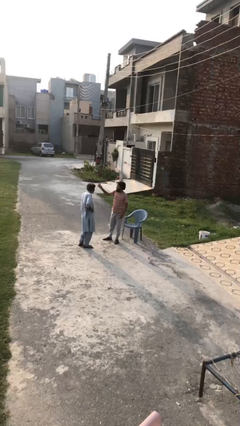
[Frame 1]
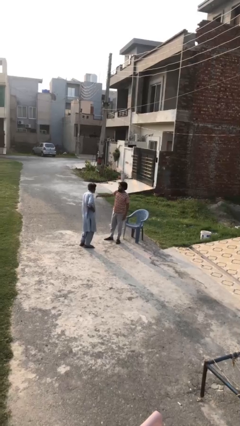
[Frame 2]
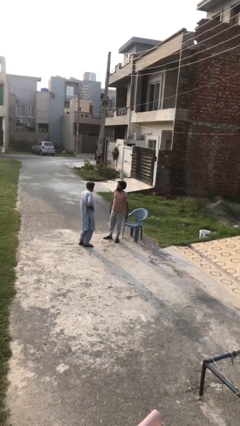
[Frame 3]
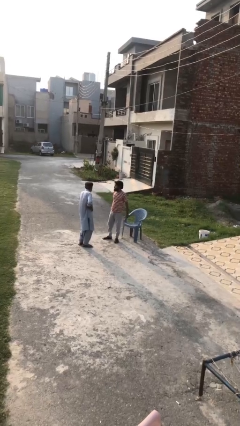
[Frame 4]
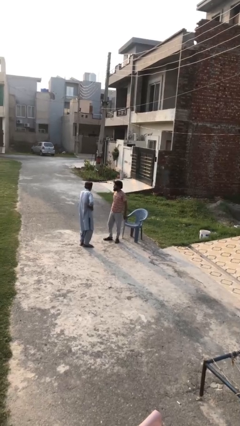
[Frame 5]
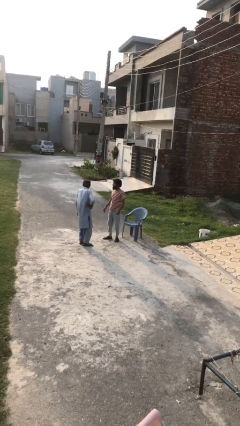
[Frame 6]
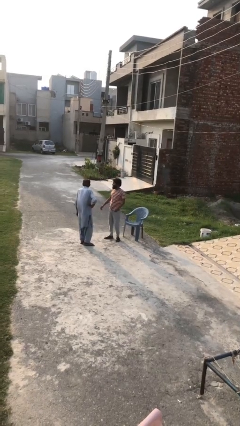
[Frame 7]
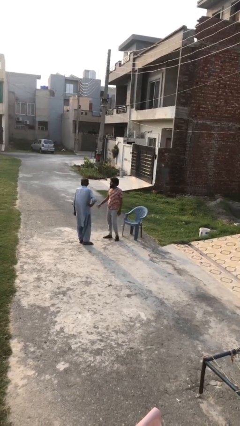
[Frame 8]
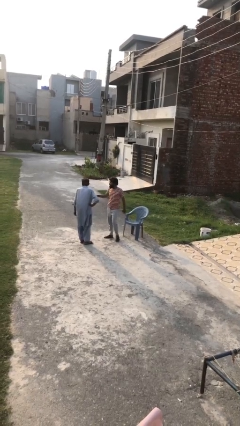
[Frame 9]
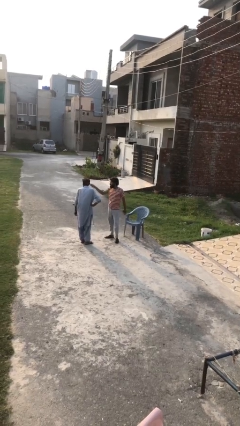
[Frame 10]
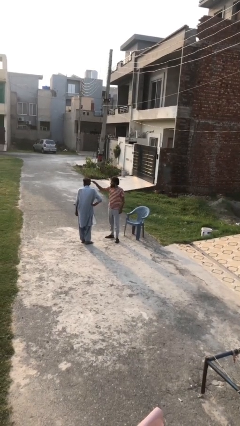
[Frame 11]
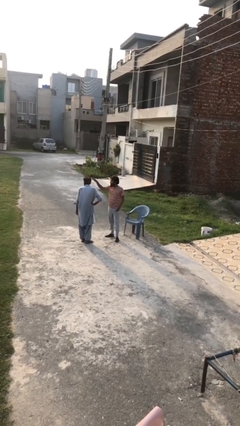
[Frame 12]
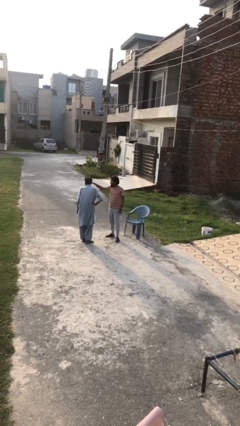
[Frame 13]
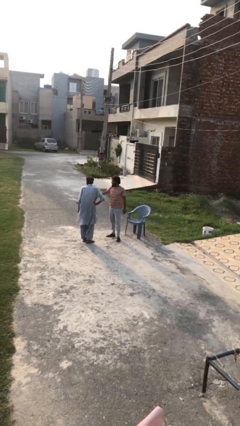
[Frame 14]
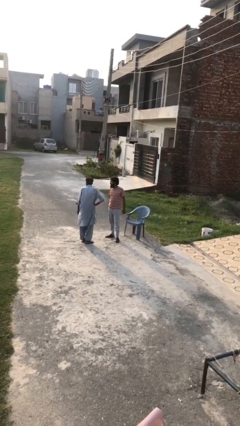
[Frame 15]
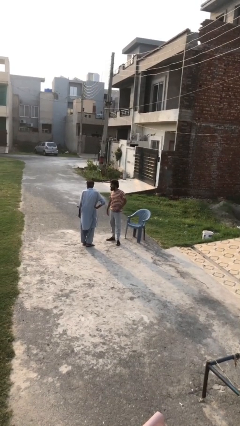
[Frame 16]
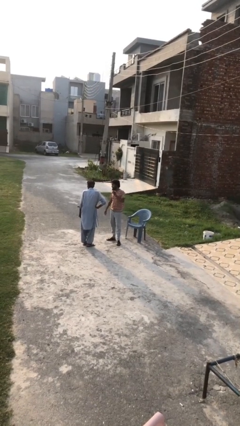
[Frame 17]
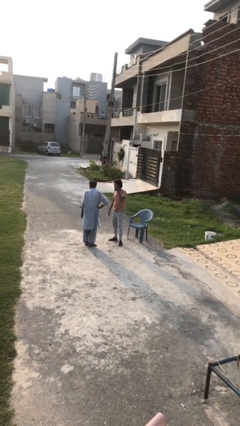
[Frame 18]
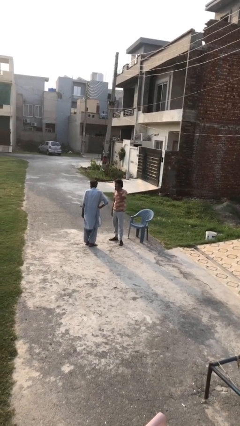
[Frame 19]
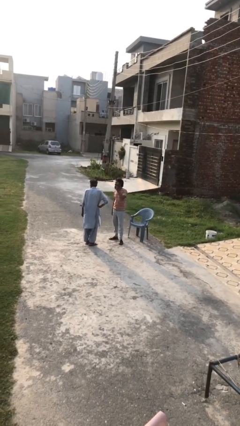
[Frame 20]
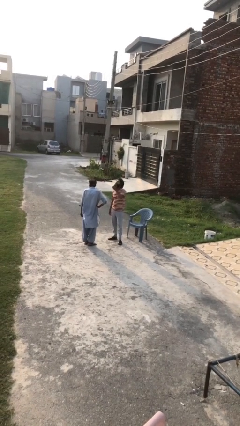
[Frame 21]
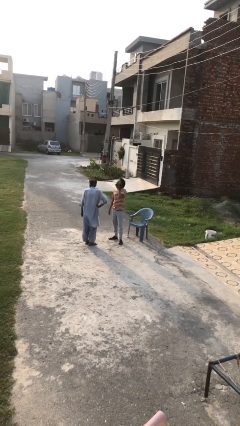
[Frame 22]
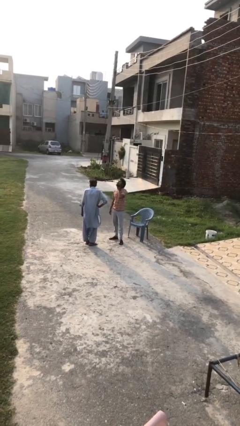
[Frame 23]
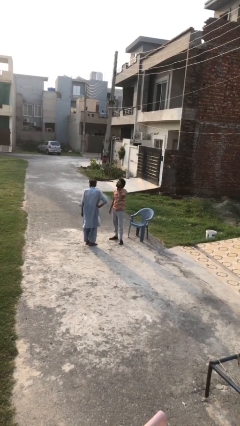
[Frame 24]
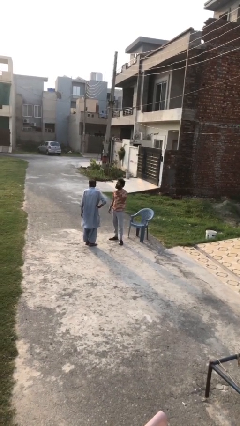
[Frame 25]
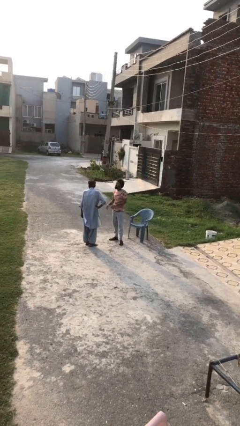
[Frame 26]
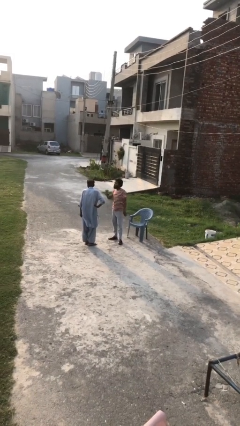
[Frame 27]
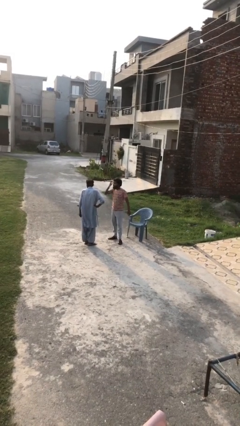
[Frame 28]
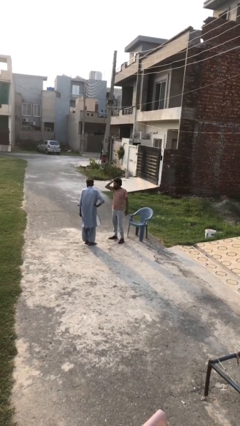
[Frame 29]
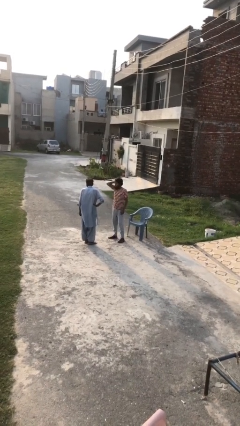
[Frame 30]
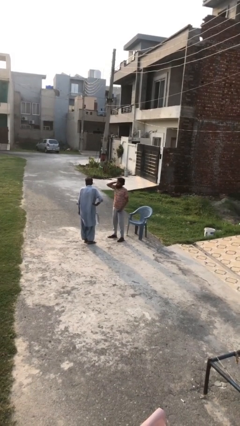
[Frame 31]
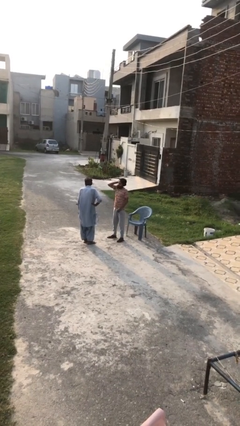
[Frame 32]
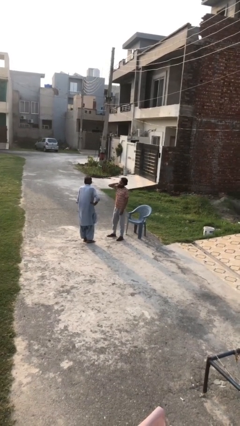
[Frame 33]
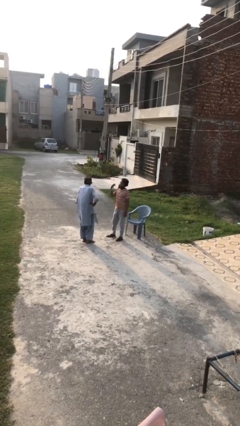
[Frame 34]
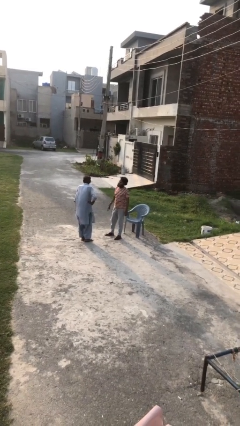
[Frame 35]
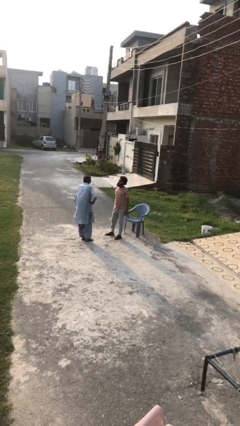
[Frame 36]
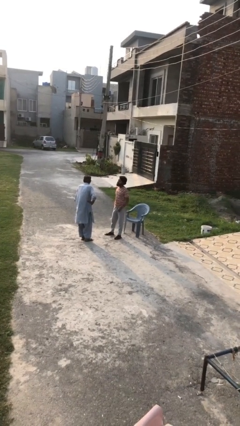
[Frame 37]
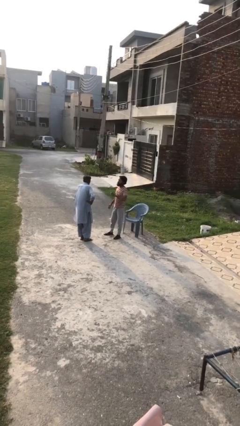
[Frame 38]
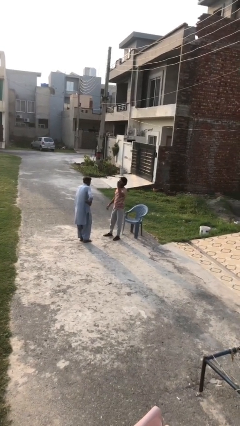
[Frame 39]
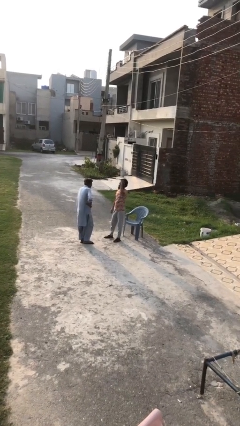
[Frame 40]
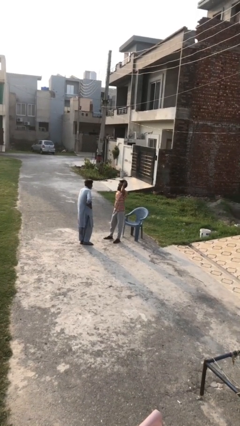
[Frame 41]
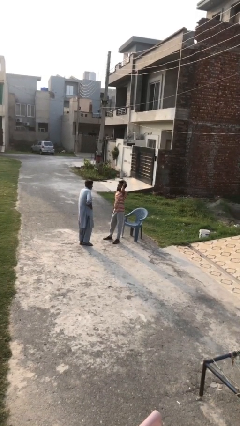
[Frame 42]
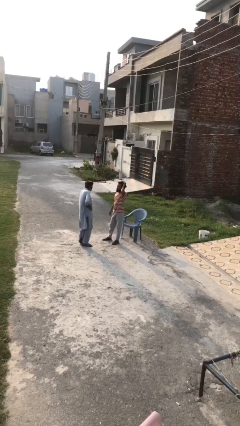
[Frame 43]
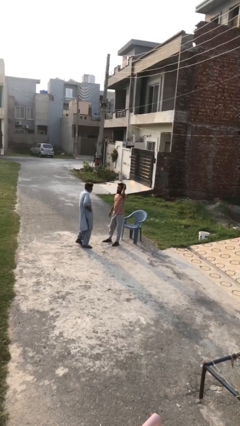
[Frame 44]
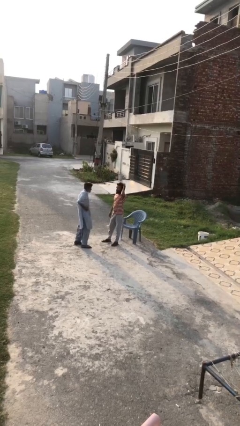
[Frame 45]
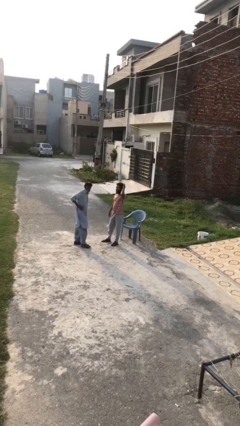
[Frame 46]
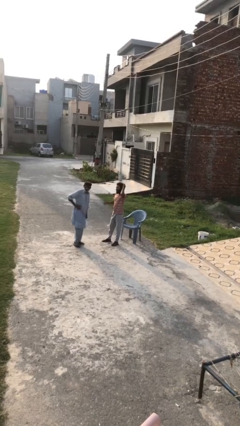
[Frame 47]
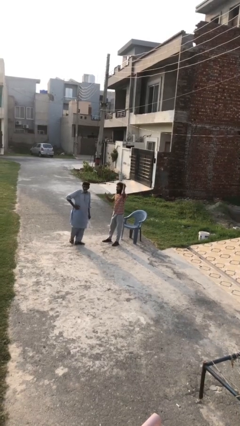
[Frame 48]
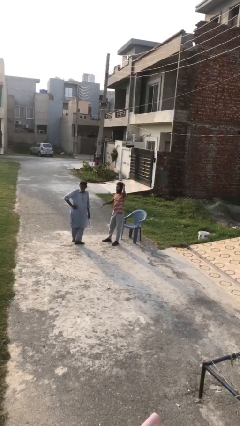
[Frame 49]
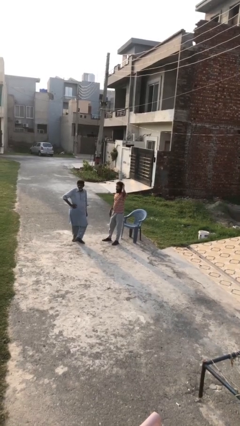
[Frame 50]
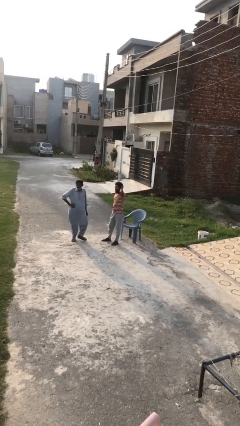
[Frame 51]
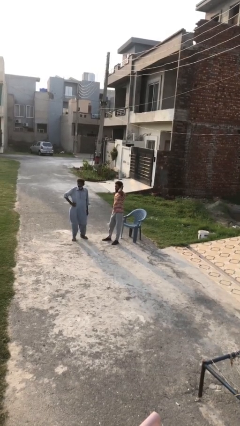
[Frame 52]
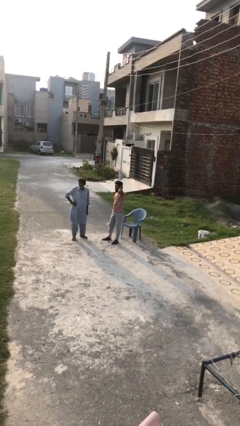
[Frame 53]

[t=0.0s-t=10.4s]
person talks to person

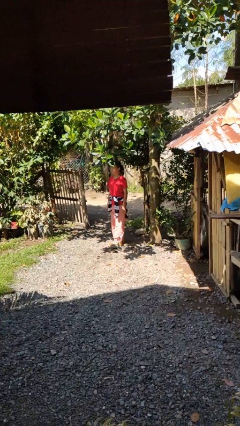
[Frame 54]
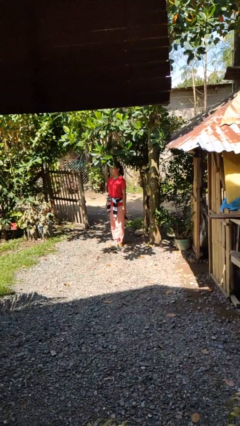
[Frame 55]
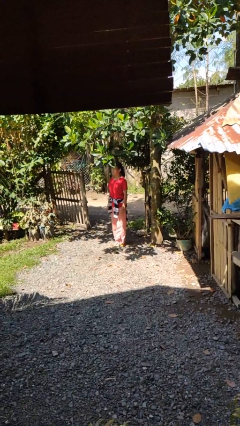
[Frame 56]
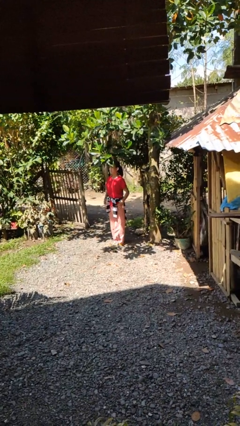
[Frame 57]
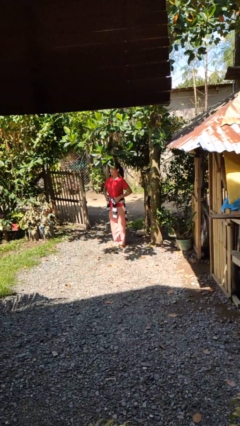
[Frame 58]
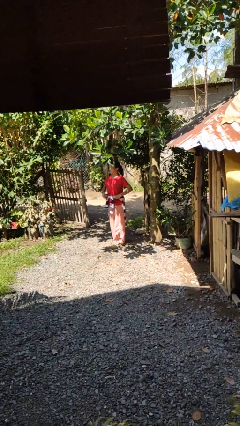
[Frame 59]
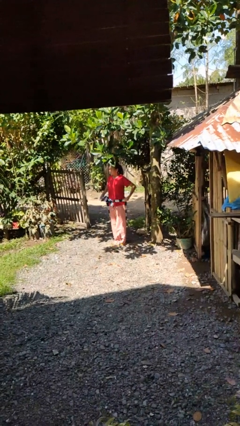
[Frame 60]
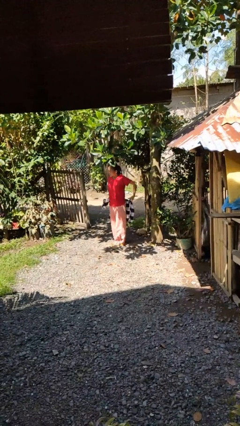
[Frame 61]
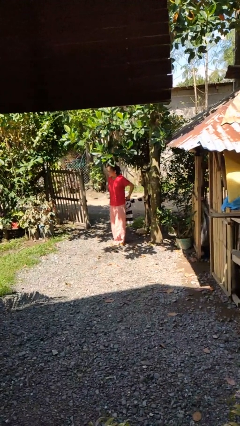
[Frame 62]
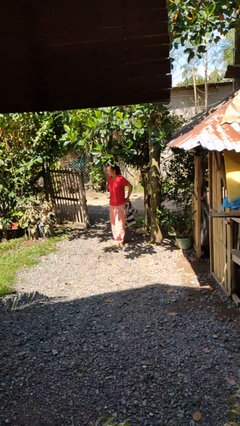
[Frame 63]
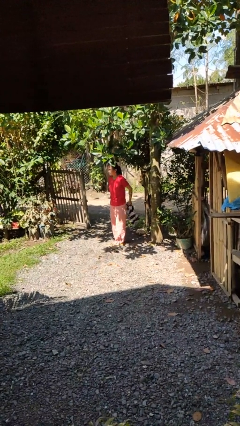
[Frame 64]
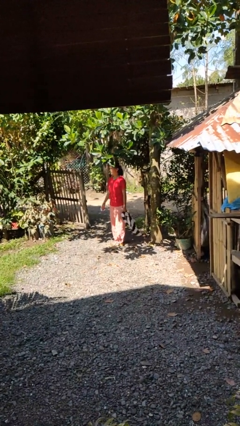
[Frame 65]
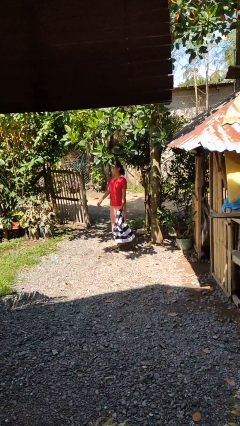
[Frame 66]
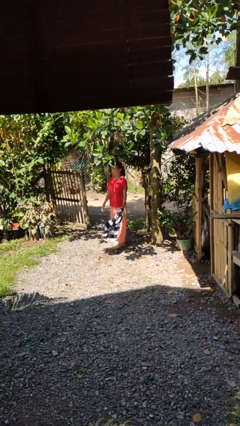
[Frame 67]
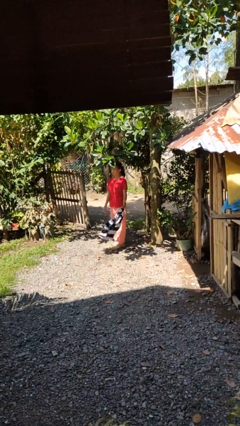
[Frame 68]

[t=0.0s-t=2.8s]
person unties jacket around waist

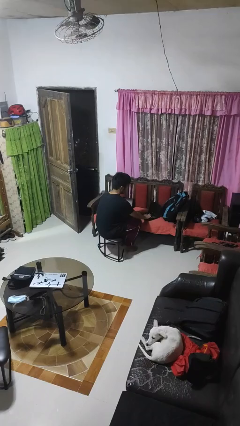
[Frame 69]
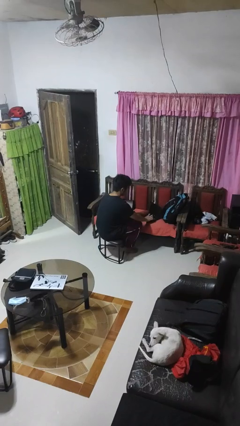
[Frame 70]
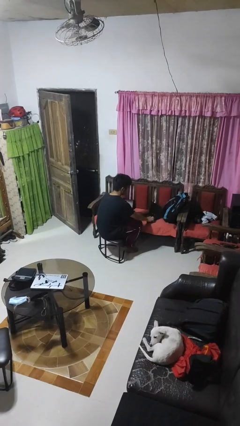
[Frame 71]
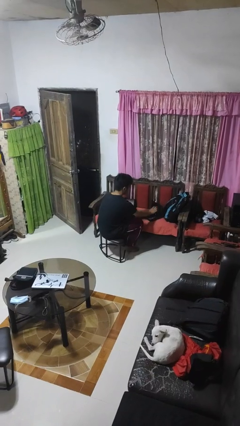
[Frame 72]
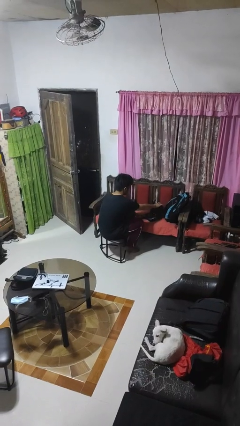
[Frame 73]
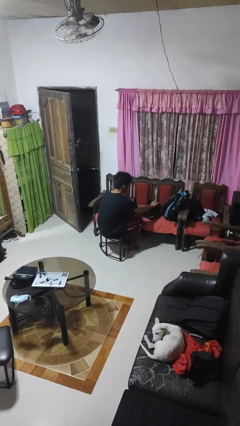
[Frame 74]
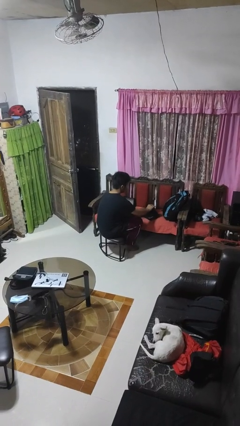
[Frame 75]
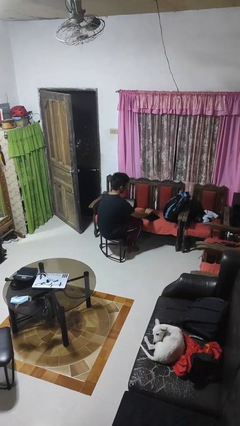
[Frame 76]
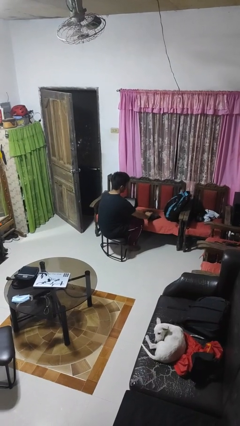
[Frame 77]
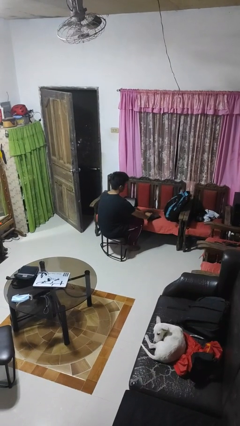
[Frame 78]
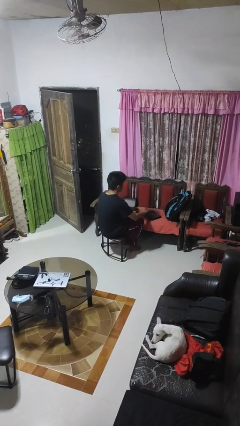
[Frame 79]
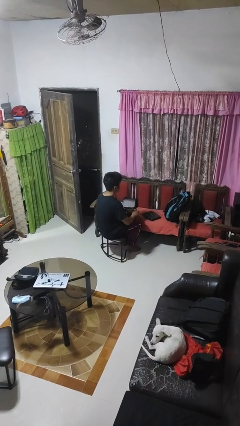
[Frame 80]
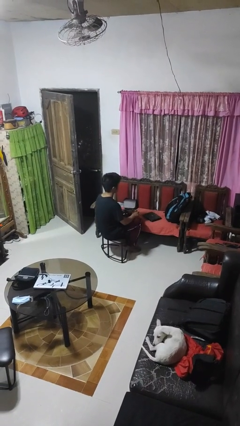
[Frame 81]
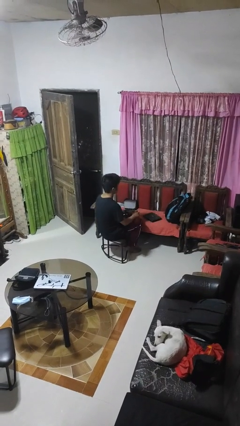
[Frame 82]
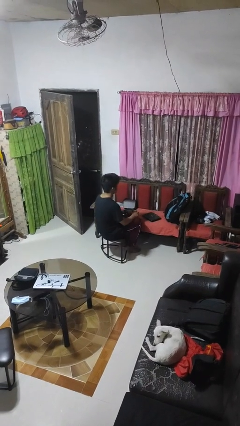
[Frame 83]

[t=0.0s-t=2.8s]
person closes laptop

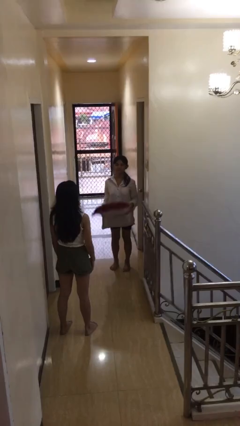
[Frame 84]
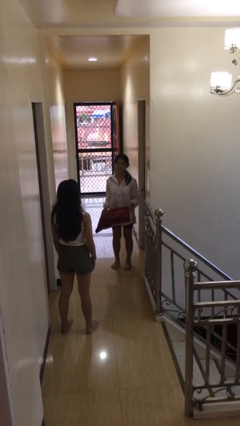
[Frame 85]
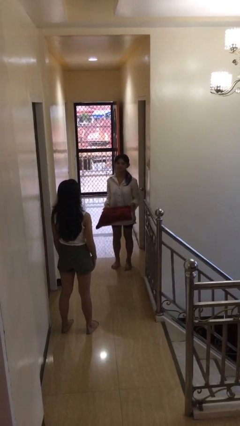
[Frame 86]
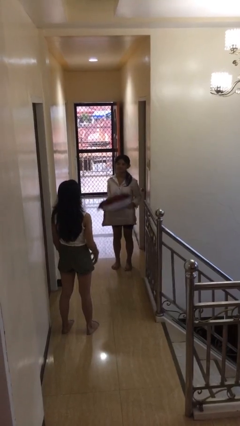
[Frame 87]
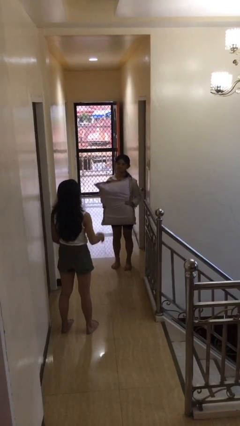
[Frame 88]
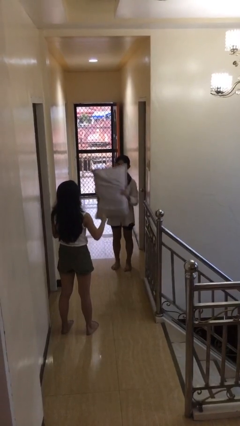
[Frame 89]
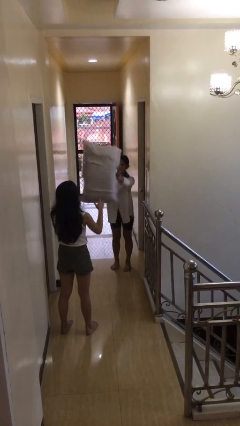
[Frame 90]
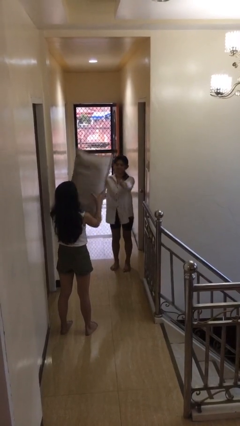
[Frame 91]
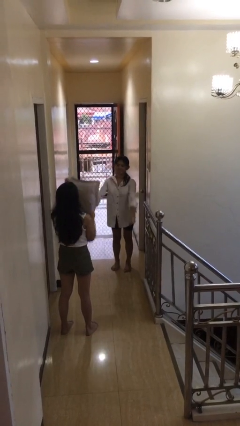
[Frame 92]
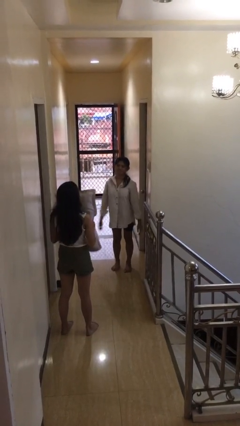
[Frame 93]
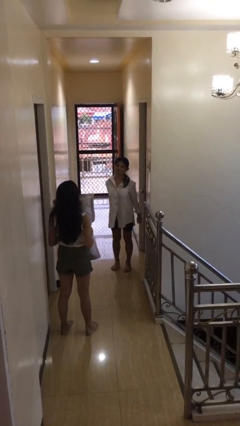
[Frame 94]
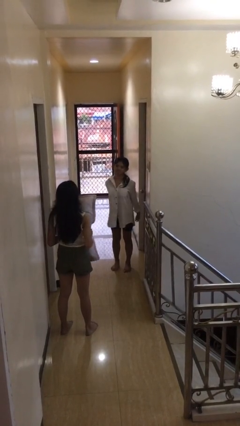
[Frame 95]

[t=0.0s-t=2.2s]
person throws object to person
